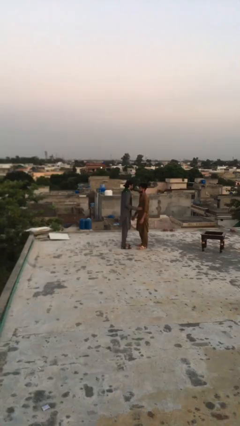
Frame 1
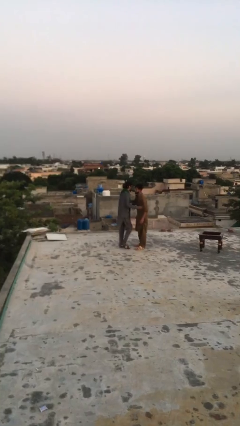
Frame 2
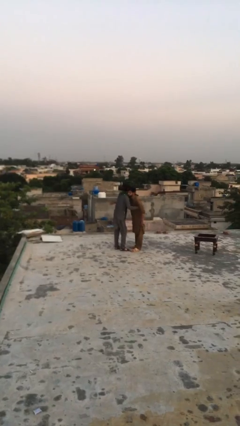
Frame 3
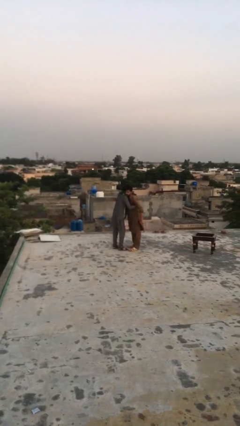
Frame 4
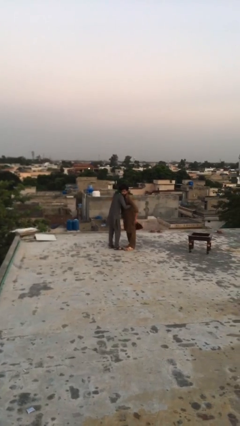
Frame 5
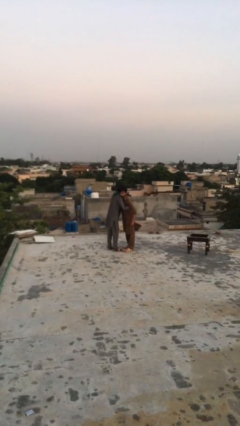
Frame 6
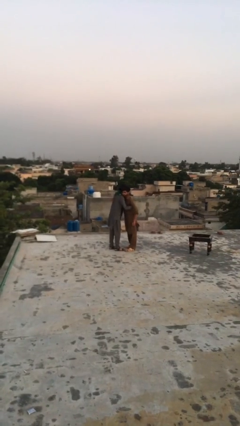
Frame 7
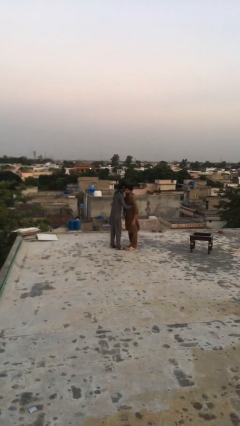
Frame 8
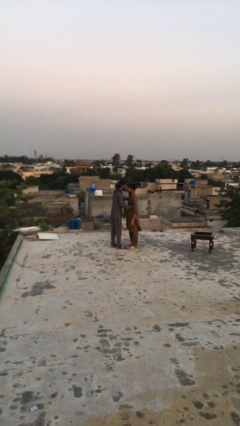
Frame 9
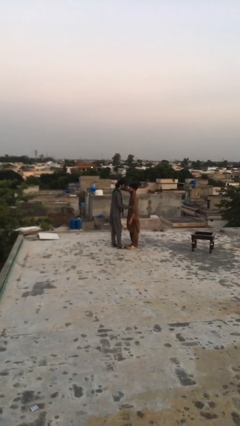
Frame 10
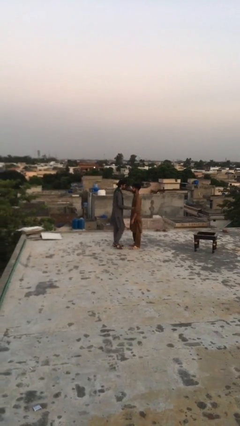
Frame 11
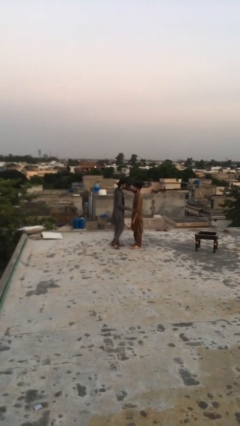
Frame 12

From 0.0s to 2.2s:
person embraces person

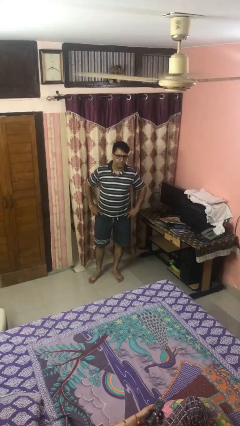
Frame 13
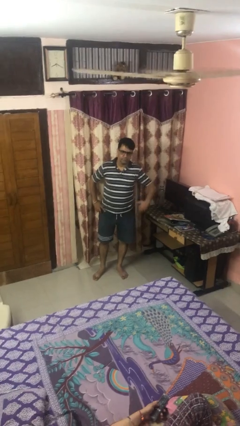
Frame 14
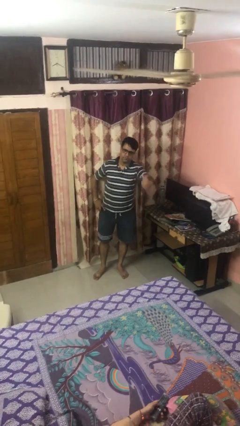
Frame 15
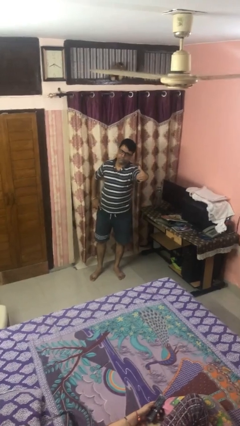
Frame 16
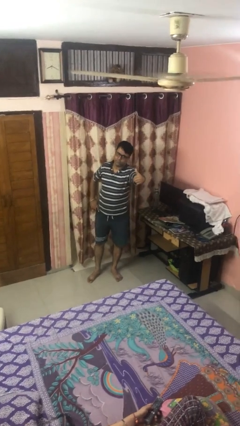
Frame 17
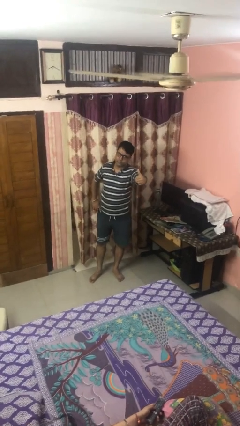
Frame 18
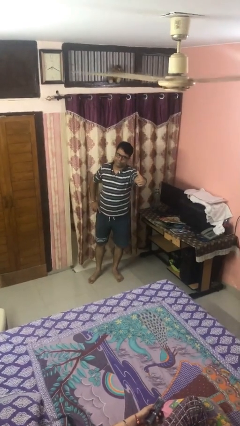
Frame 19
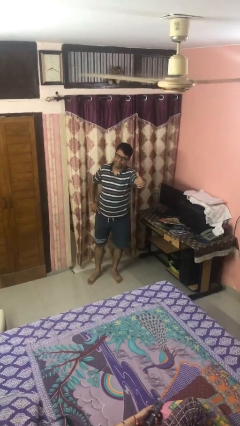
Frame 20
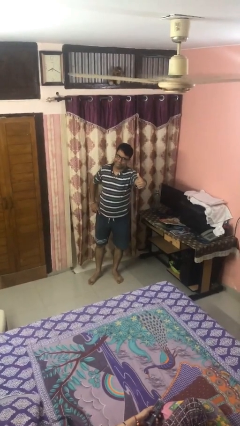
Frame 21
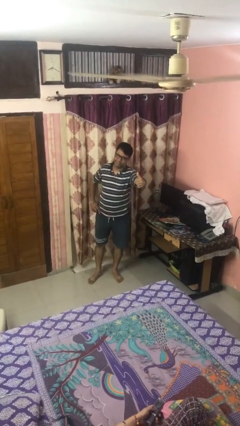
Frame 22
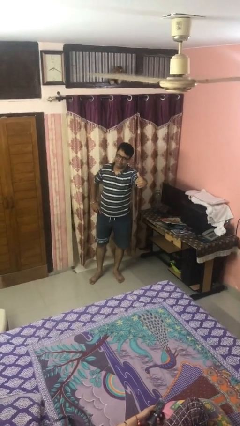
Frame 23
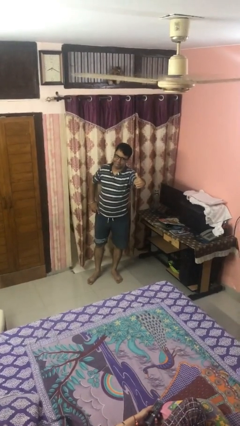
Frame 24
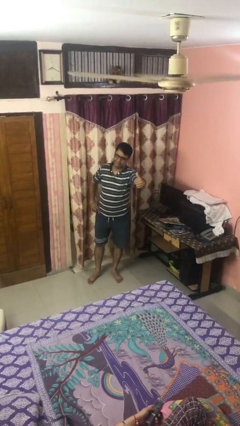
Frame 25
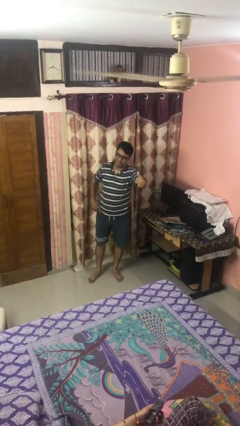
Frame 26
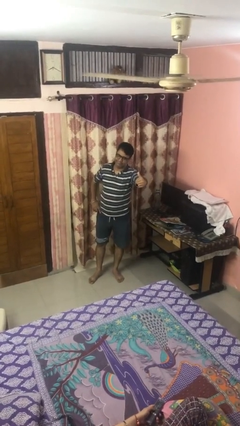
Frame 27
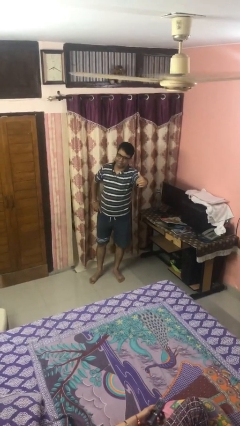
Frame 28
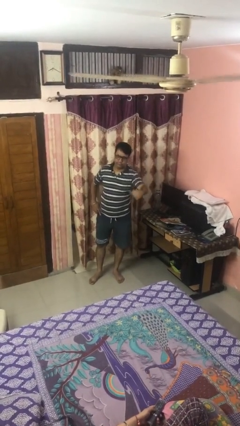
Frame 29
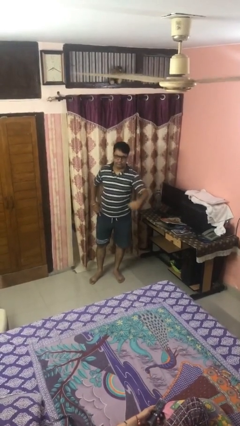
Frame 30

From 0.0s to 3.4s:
person gestures thumbs up

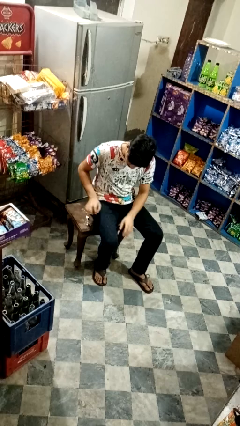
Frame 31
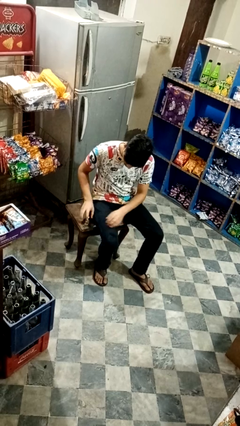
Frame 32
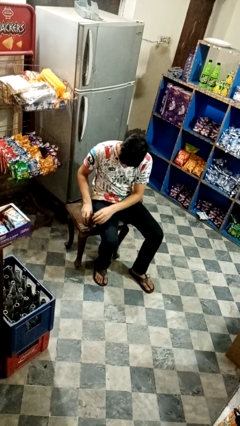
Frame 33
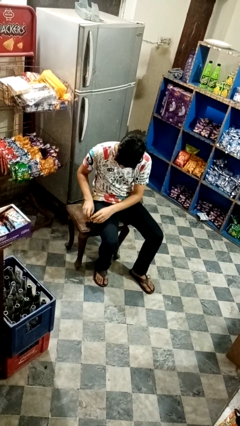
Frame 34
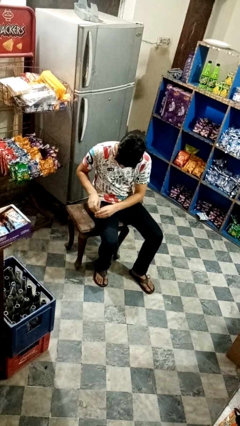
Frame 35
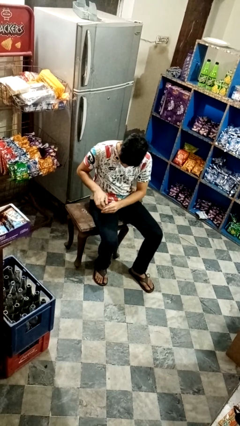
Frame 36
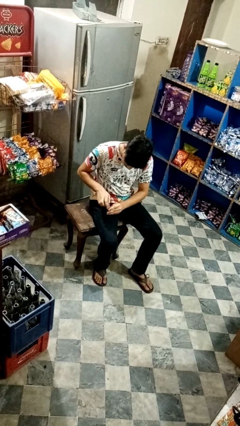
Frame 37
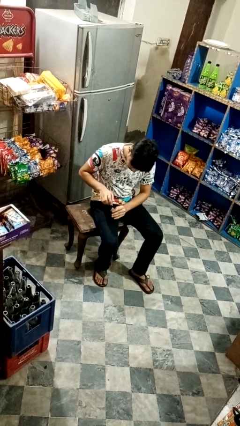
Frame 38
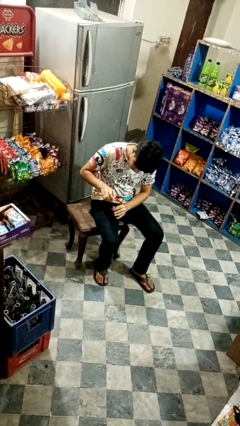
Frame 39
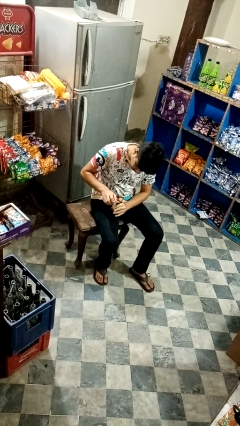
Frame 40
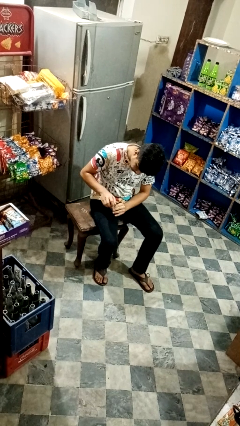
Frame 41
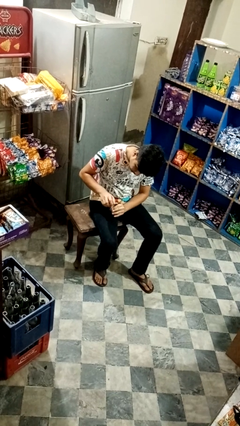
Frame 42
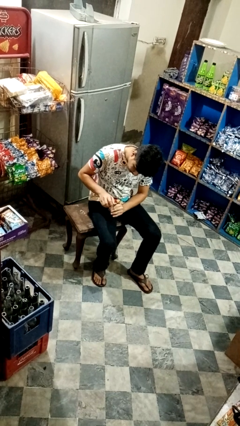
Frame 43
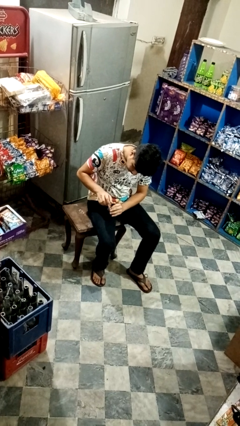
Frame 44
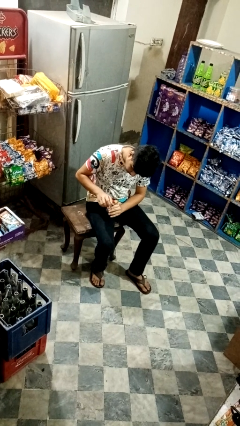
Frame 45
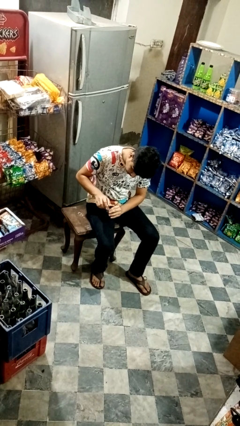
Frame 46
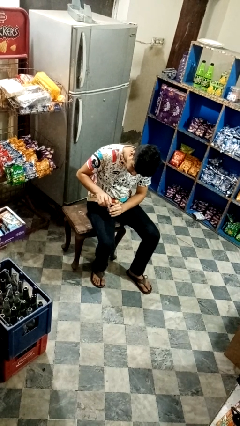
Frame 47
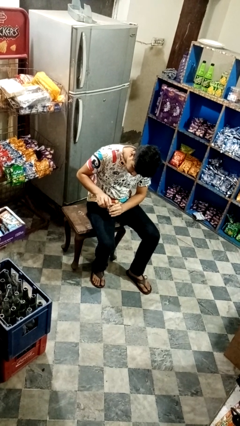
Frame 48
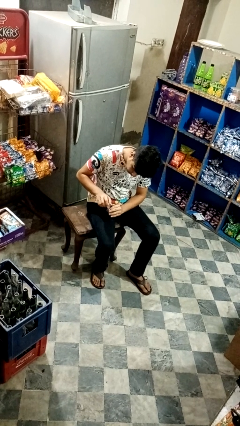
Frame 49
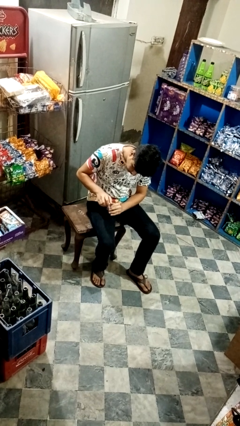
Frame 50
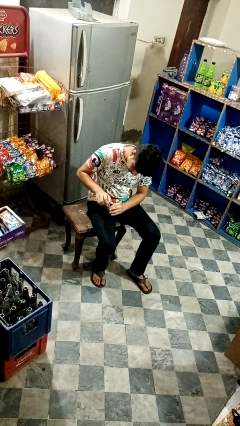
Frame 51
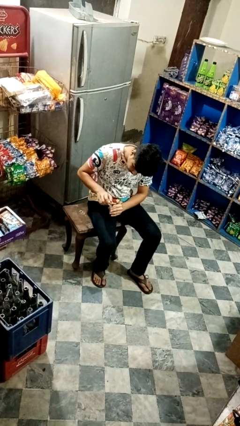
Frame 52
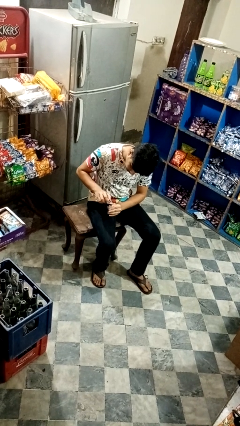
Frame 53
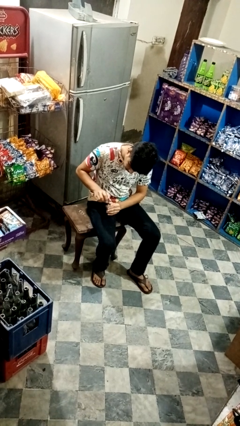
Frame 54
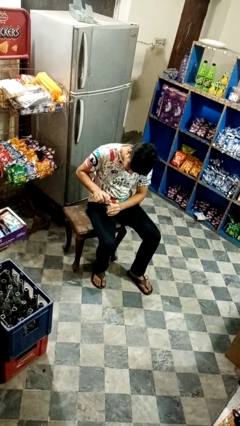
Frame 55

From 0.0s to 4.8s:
person paints fingernails

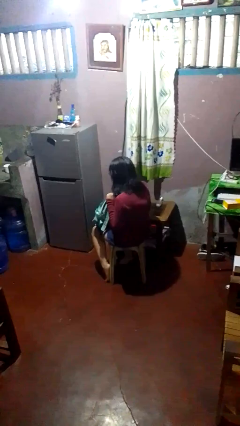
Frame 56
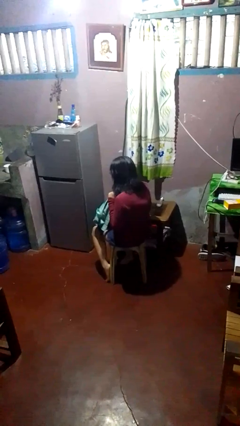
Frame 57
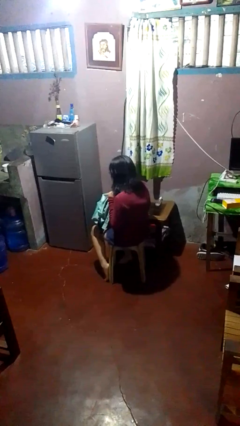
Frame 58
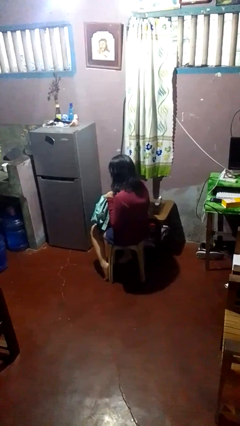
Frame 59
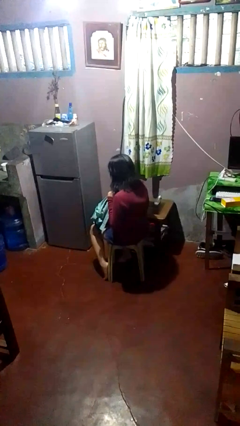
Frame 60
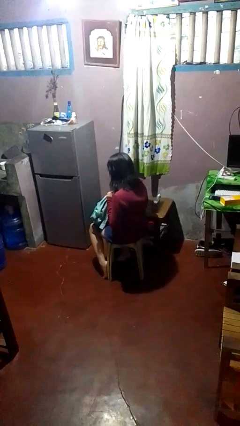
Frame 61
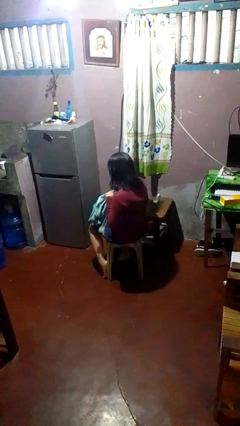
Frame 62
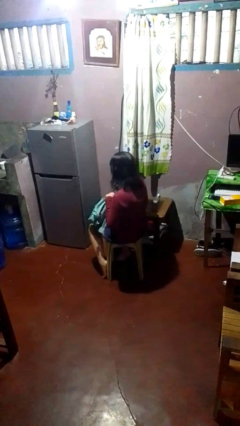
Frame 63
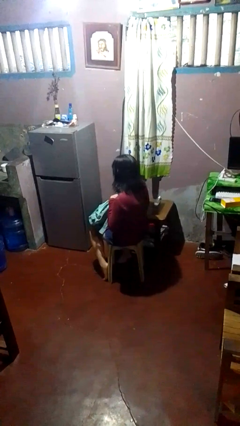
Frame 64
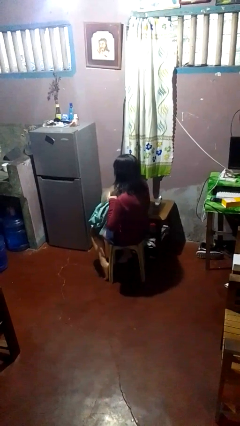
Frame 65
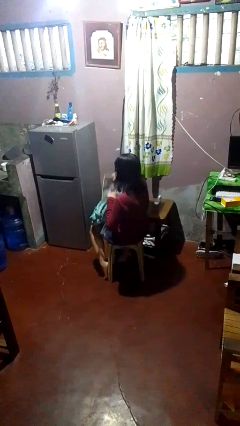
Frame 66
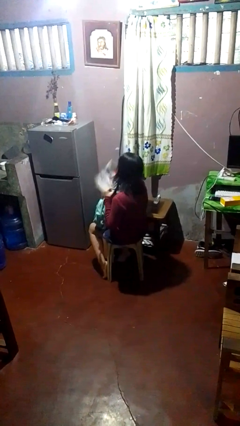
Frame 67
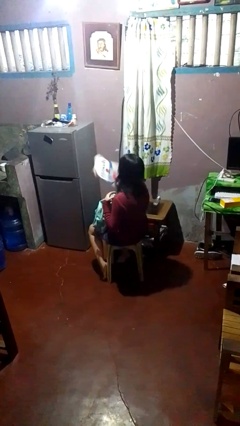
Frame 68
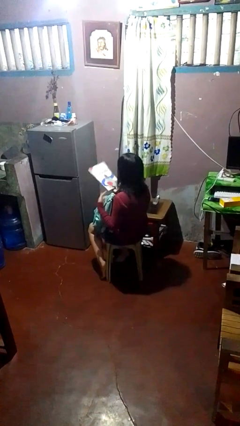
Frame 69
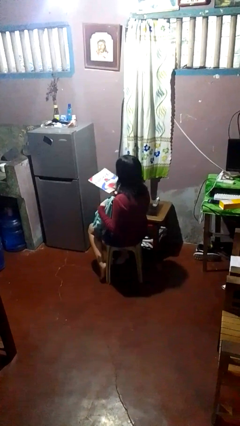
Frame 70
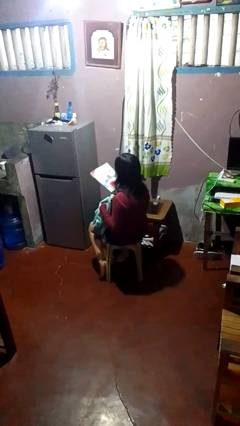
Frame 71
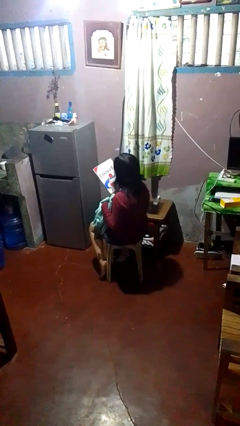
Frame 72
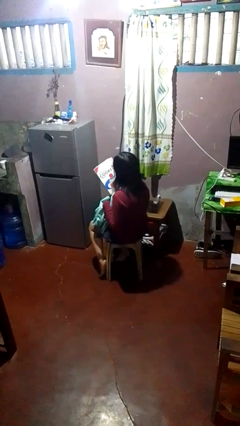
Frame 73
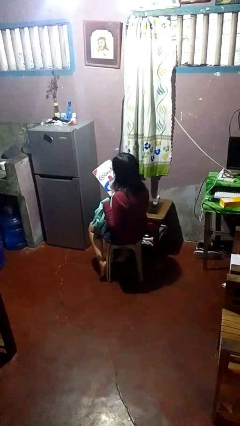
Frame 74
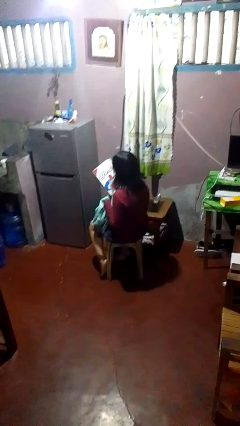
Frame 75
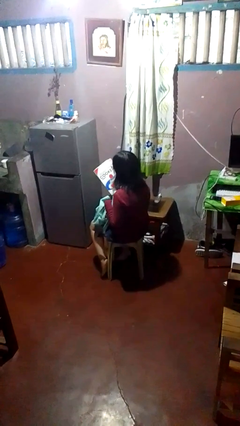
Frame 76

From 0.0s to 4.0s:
person takes object from backpack

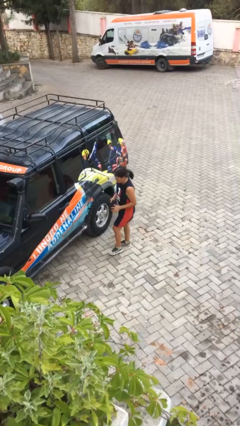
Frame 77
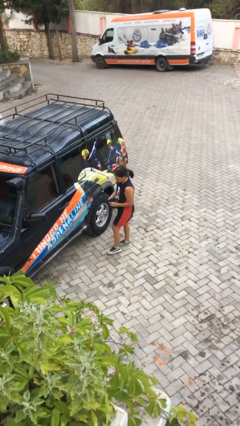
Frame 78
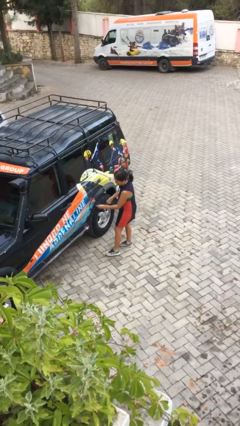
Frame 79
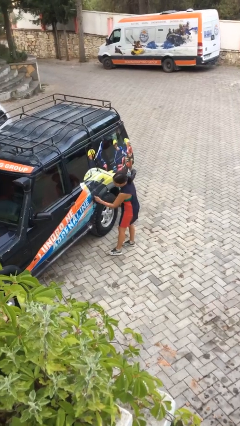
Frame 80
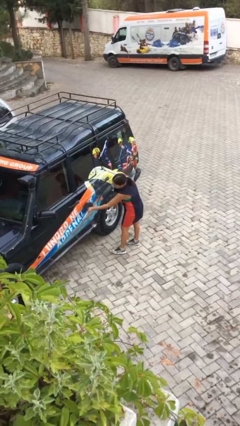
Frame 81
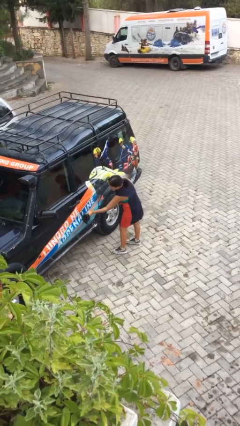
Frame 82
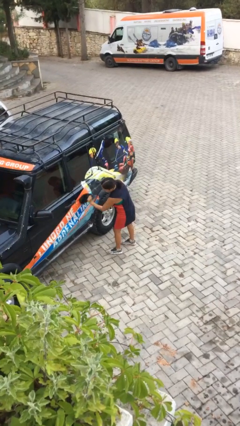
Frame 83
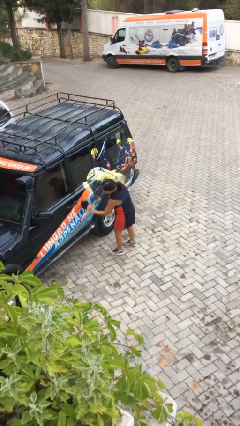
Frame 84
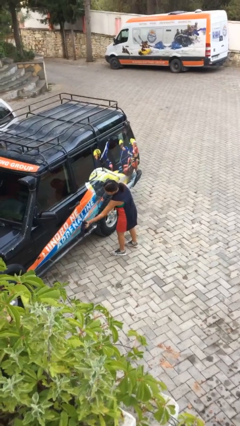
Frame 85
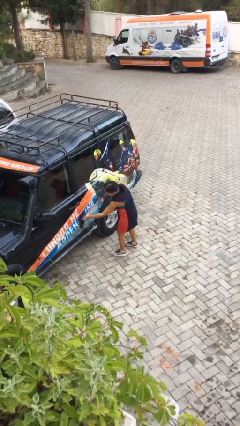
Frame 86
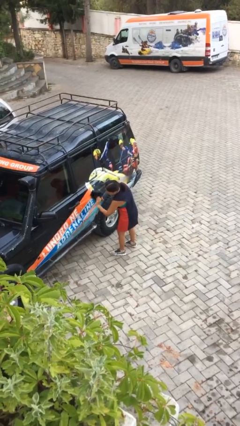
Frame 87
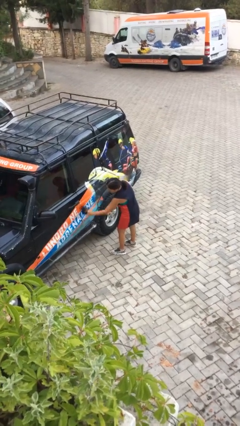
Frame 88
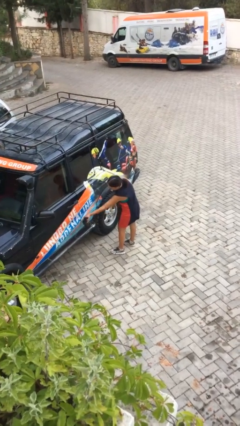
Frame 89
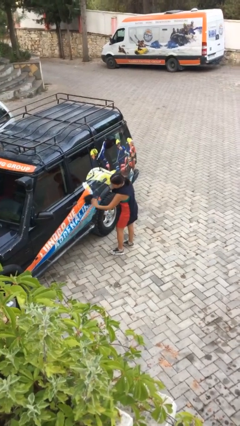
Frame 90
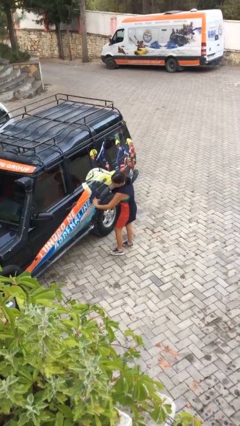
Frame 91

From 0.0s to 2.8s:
person polishes car with rag

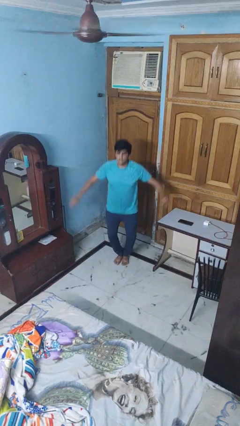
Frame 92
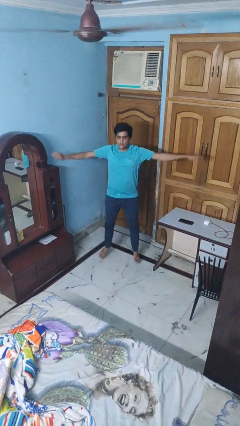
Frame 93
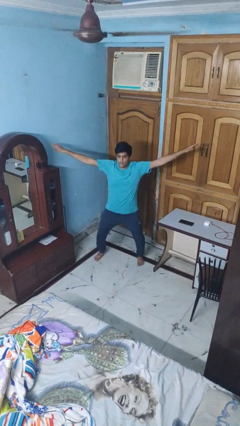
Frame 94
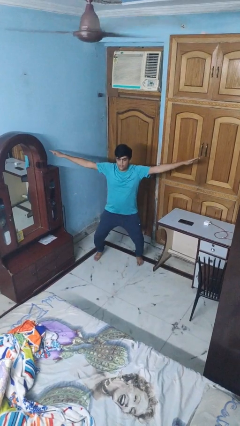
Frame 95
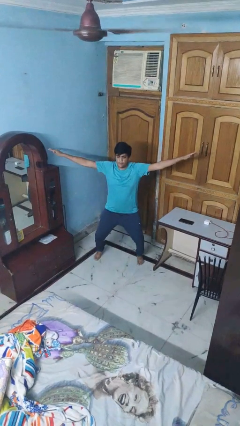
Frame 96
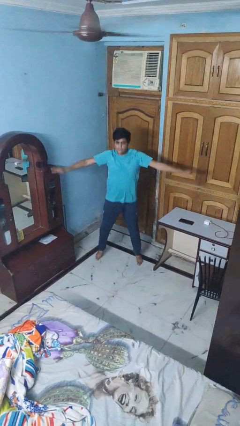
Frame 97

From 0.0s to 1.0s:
person exercises with jumping jacks
